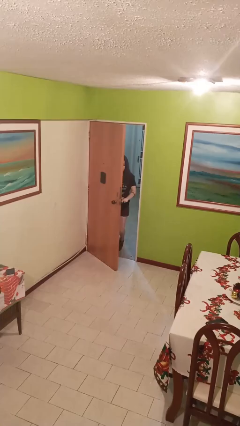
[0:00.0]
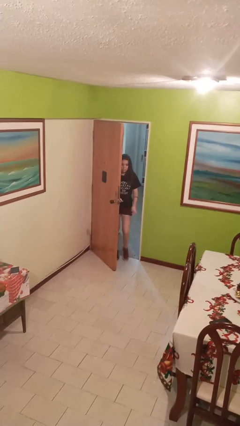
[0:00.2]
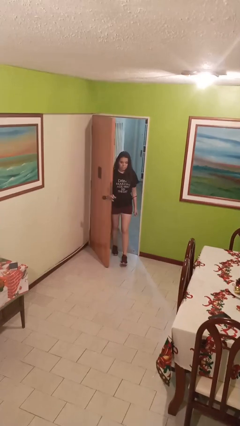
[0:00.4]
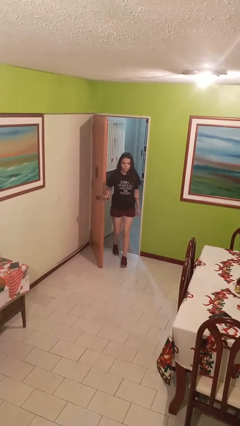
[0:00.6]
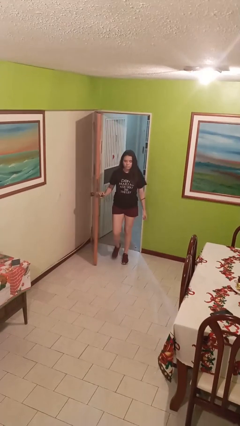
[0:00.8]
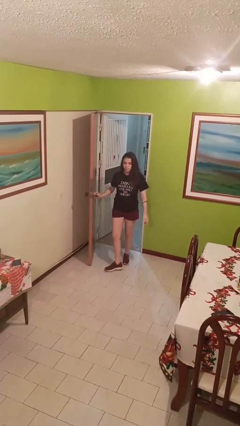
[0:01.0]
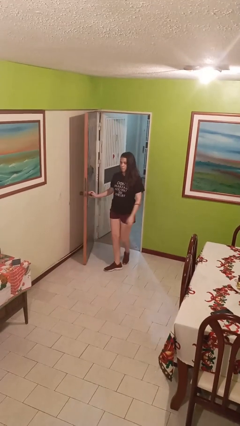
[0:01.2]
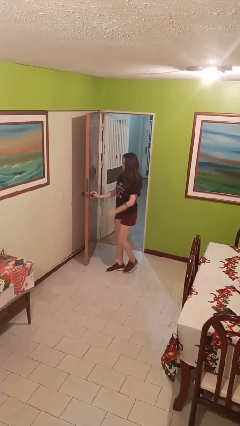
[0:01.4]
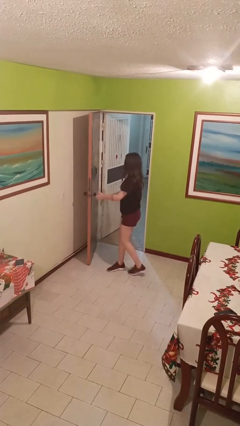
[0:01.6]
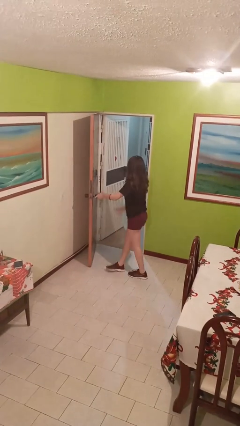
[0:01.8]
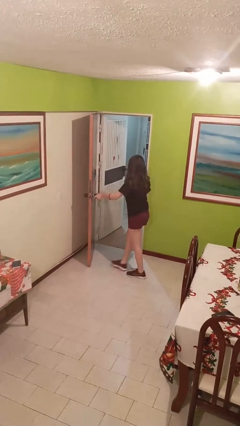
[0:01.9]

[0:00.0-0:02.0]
person opens facility door

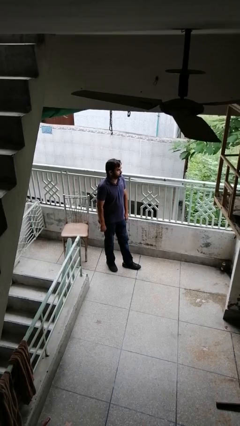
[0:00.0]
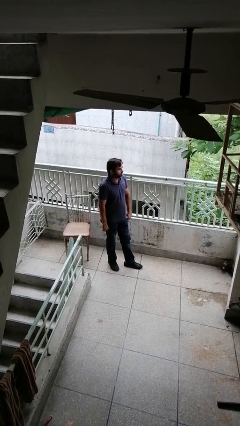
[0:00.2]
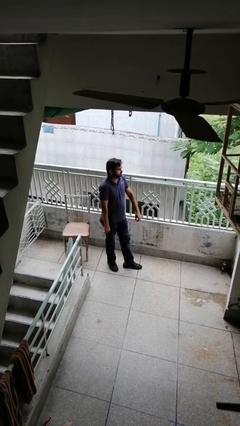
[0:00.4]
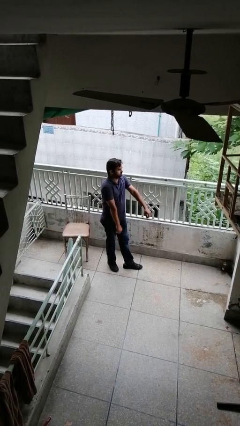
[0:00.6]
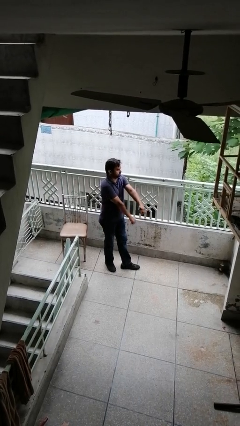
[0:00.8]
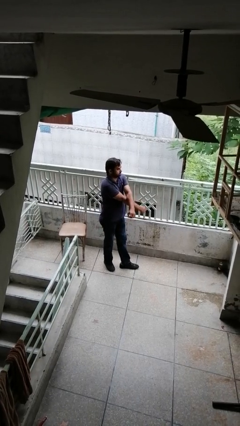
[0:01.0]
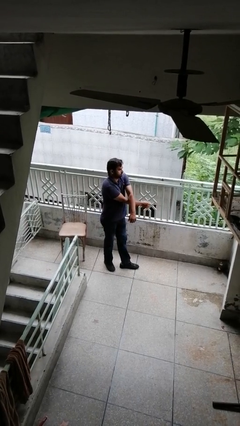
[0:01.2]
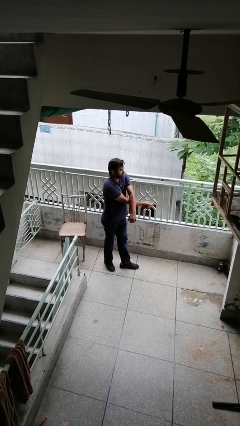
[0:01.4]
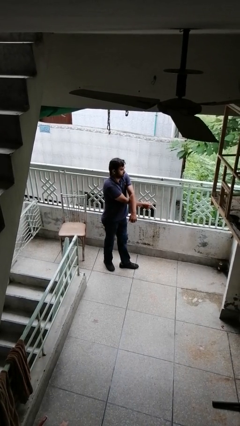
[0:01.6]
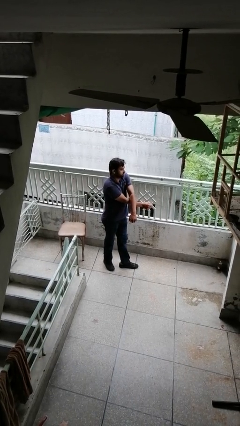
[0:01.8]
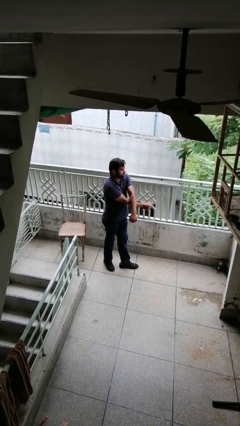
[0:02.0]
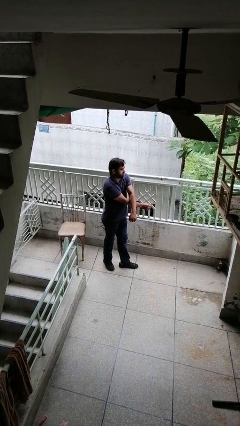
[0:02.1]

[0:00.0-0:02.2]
person gestures arms x

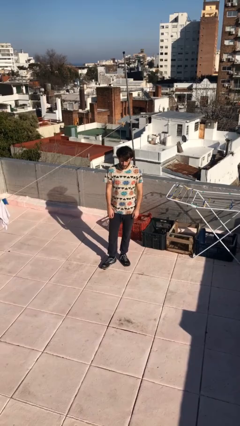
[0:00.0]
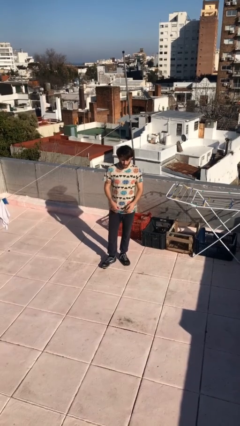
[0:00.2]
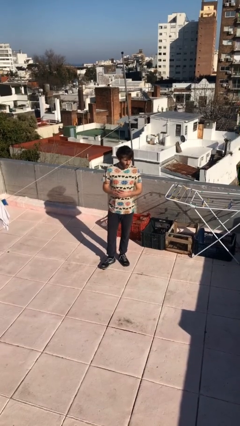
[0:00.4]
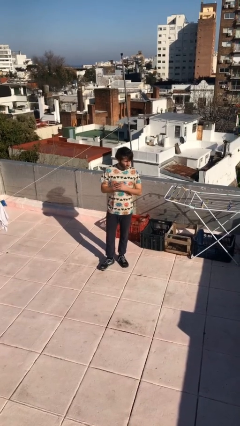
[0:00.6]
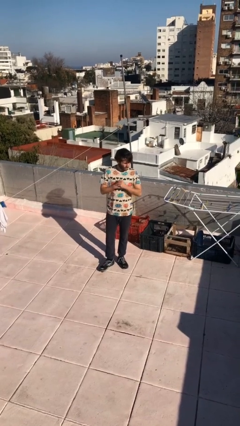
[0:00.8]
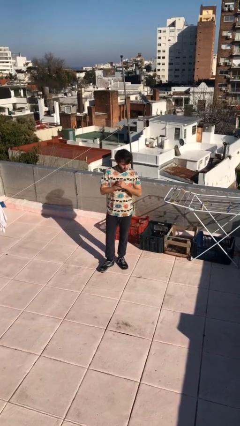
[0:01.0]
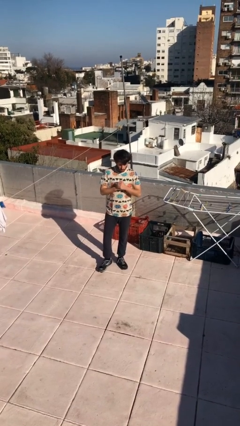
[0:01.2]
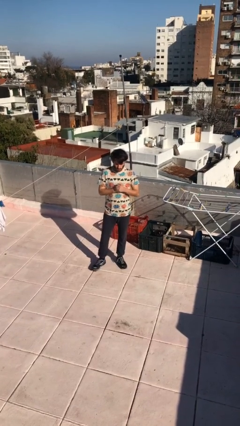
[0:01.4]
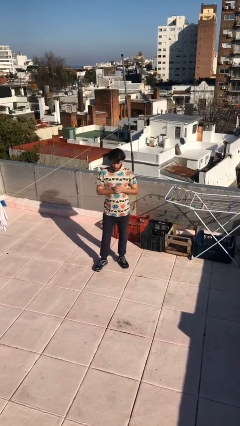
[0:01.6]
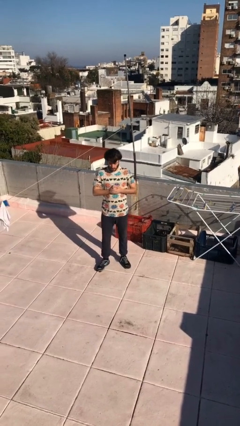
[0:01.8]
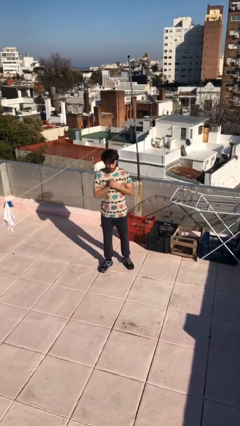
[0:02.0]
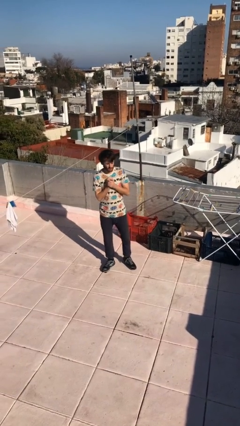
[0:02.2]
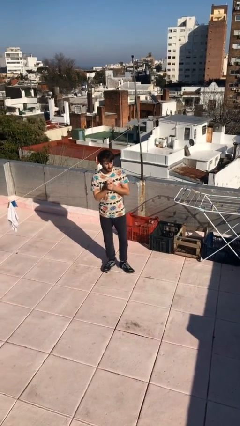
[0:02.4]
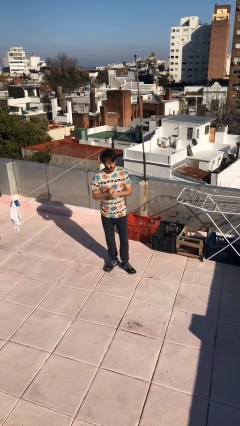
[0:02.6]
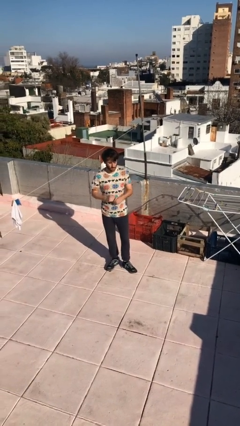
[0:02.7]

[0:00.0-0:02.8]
person cracks knuckles

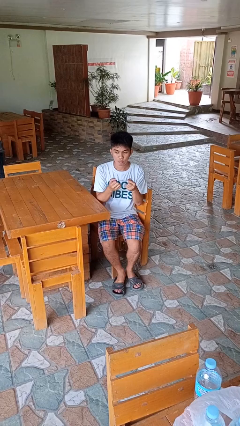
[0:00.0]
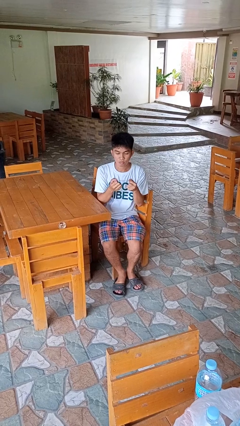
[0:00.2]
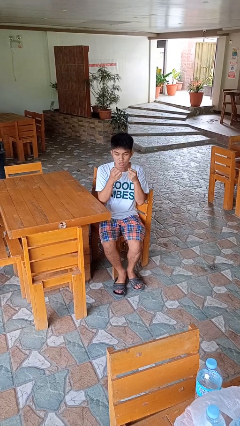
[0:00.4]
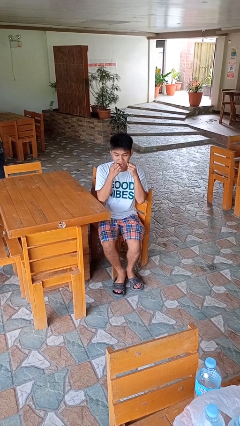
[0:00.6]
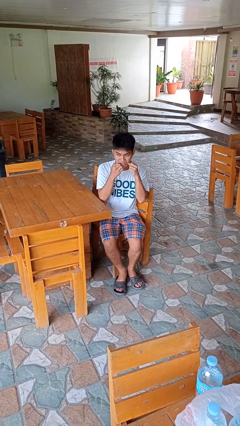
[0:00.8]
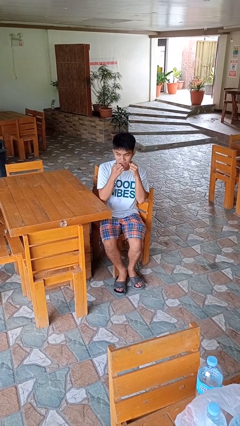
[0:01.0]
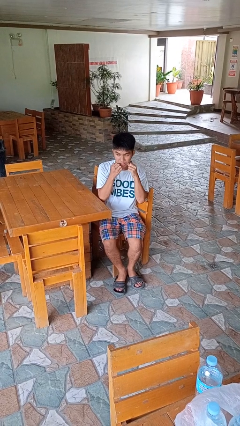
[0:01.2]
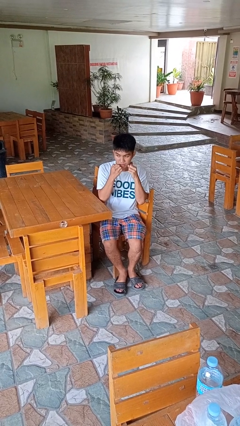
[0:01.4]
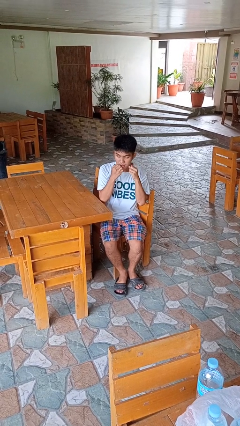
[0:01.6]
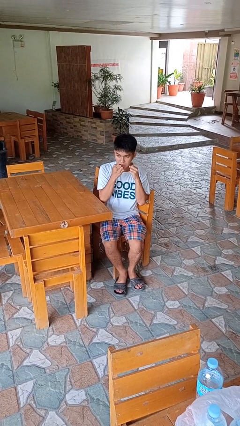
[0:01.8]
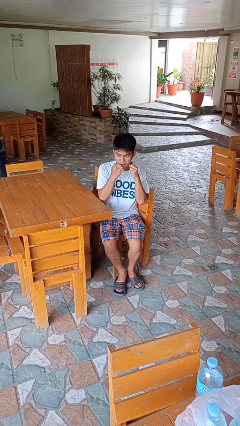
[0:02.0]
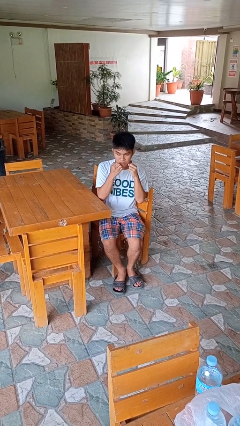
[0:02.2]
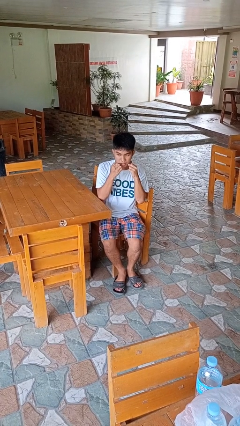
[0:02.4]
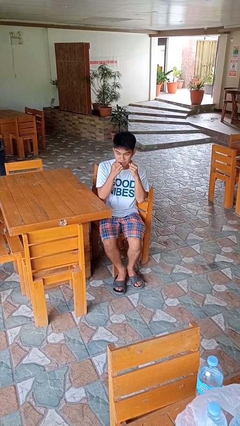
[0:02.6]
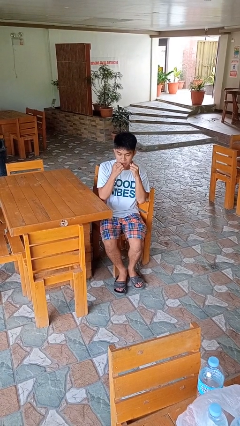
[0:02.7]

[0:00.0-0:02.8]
person flosses

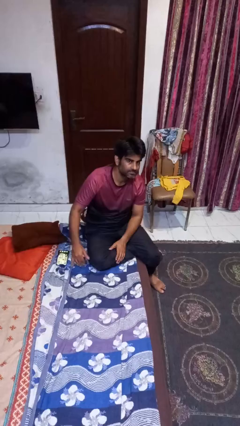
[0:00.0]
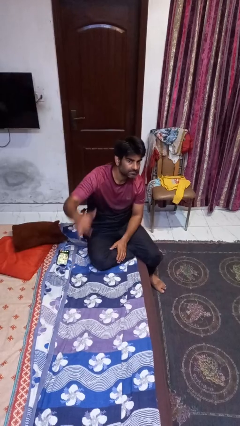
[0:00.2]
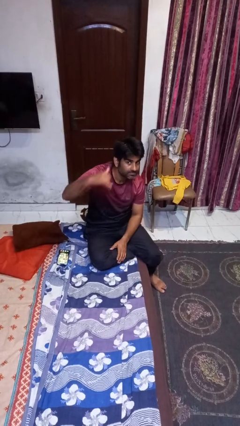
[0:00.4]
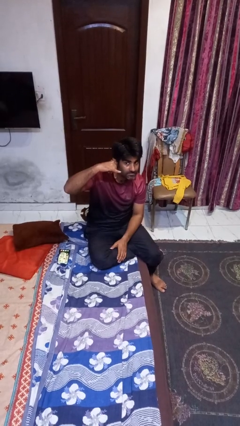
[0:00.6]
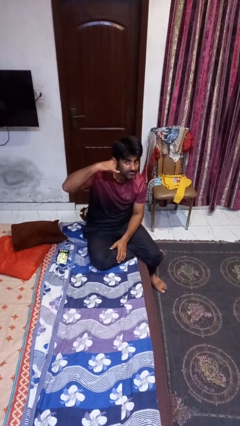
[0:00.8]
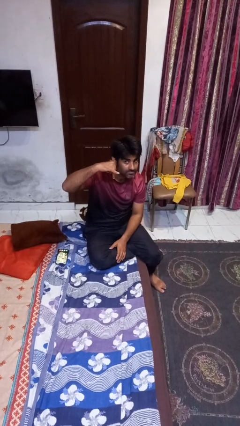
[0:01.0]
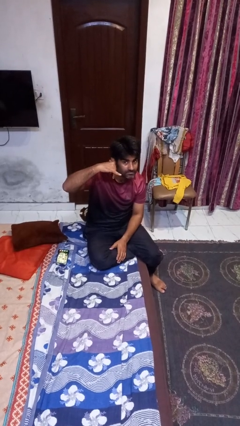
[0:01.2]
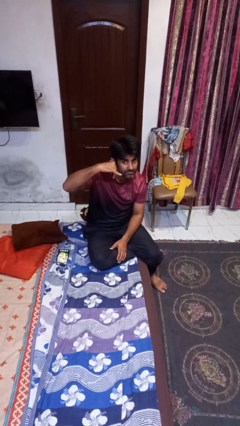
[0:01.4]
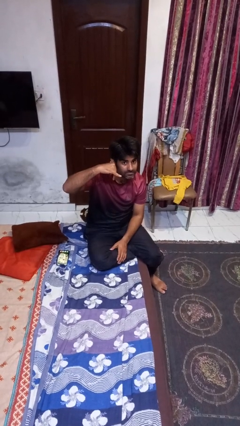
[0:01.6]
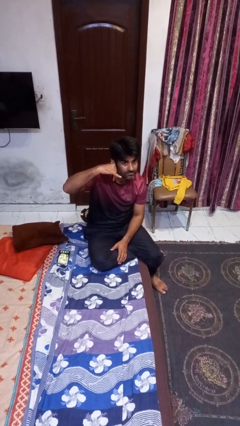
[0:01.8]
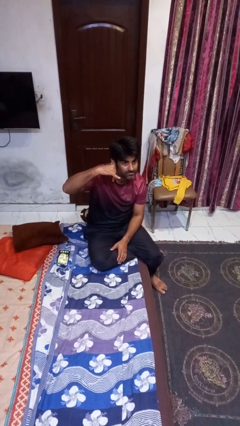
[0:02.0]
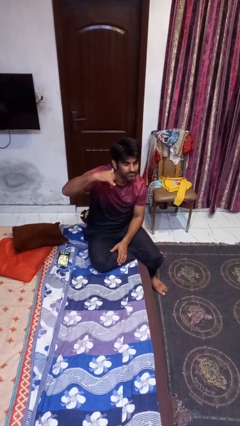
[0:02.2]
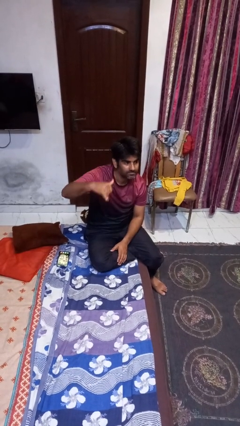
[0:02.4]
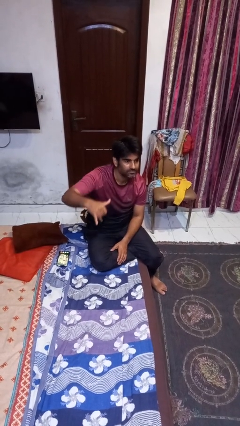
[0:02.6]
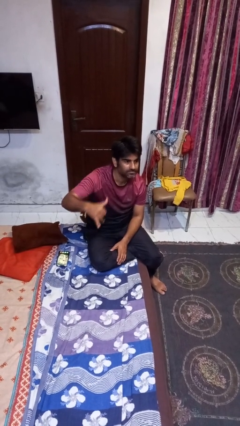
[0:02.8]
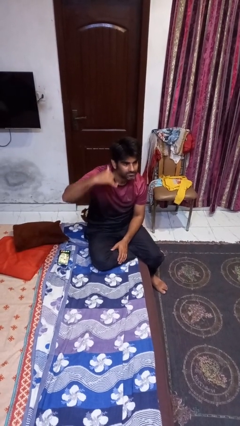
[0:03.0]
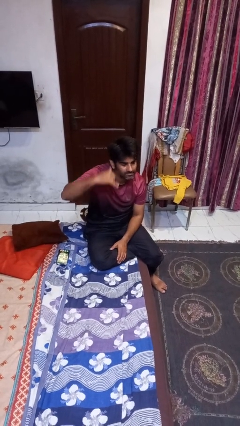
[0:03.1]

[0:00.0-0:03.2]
person gestures call me

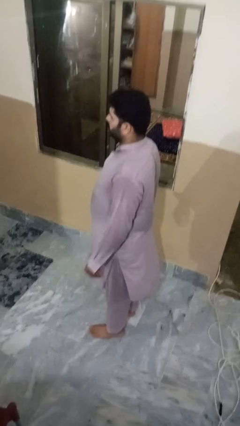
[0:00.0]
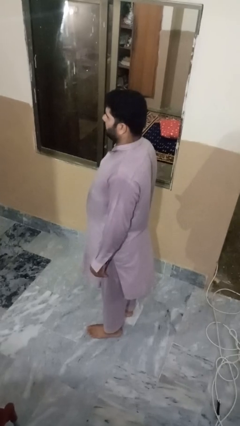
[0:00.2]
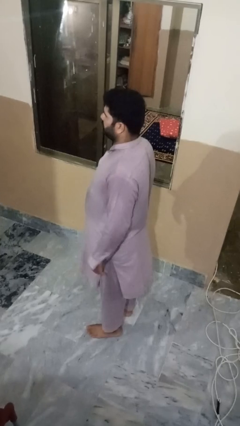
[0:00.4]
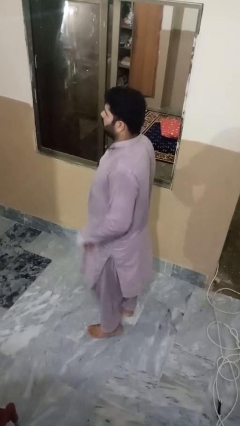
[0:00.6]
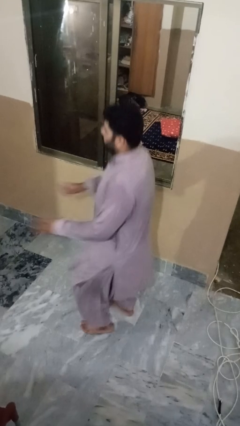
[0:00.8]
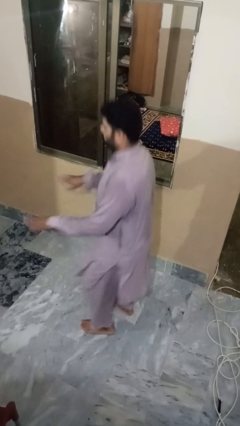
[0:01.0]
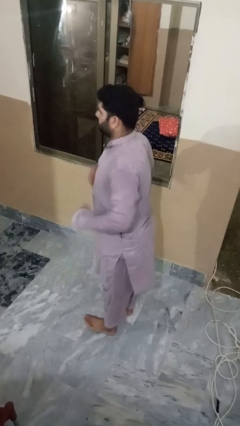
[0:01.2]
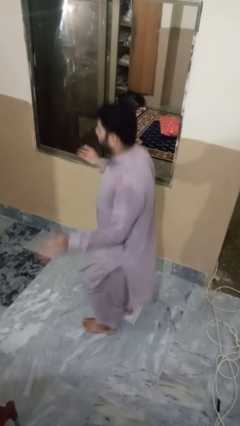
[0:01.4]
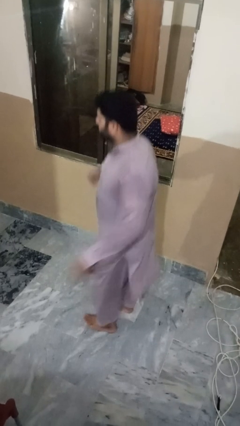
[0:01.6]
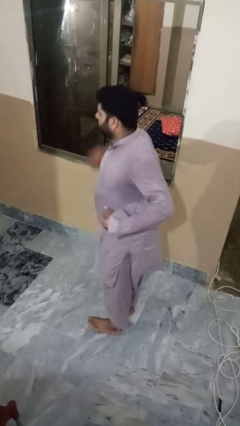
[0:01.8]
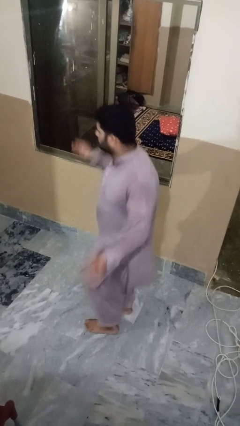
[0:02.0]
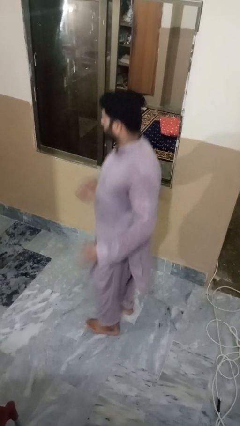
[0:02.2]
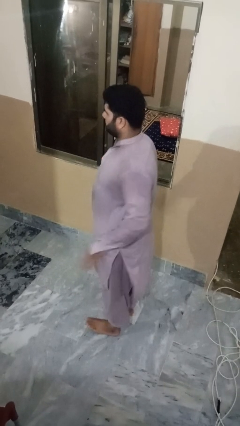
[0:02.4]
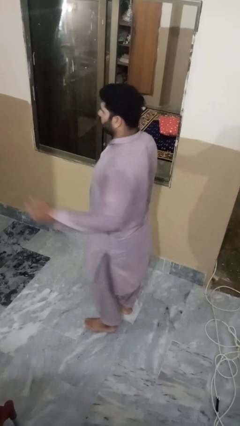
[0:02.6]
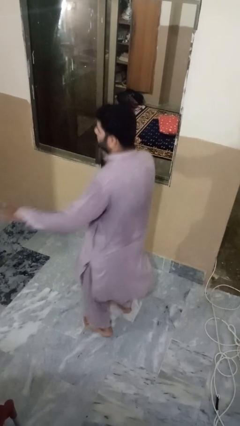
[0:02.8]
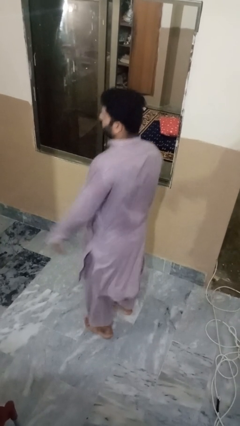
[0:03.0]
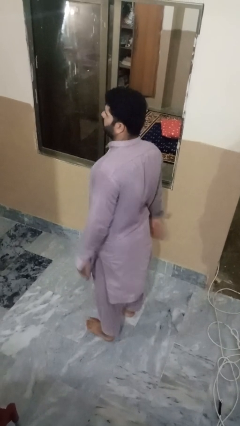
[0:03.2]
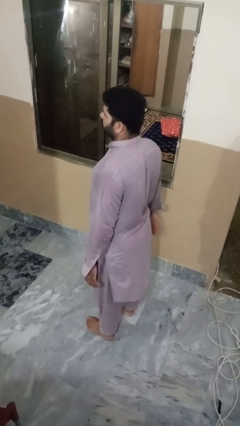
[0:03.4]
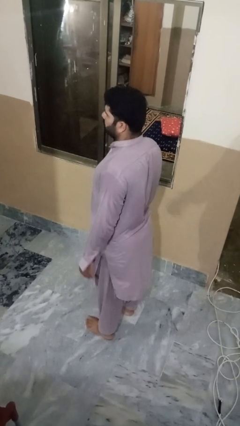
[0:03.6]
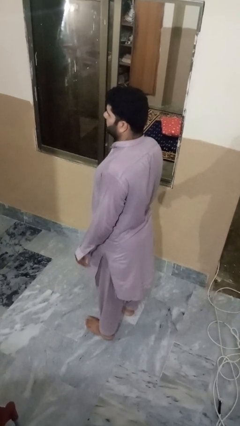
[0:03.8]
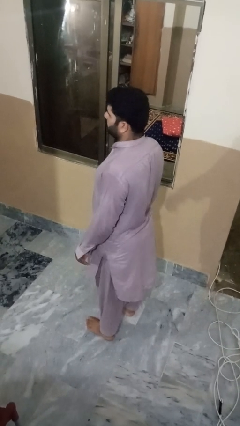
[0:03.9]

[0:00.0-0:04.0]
person dances in place

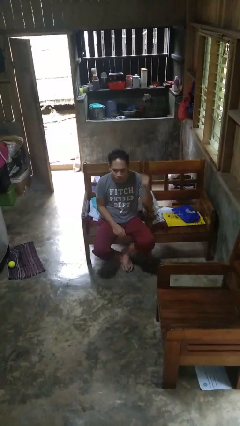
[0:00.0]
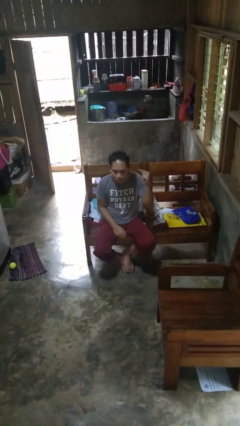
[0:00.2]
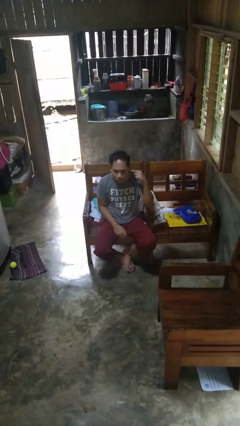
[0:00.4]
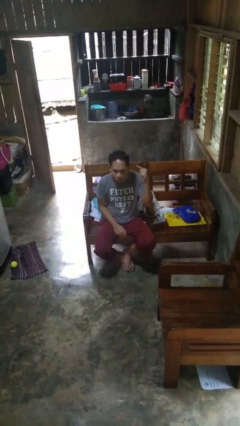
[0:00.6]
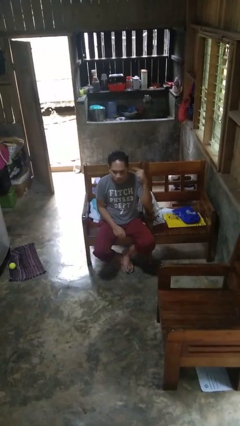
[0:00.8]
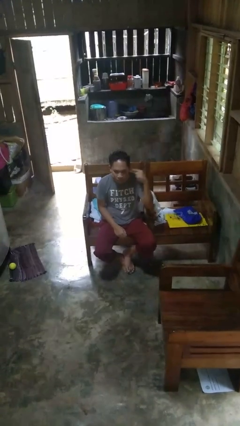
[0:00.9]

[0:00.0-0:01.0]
person gestures listen closely
